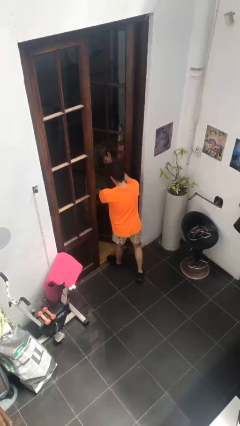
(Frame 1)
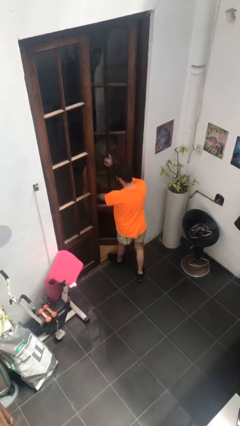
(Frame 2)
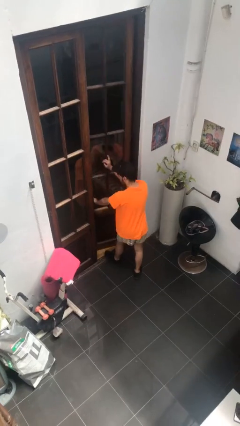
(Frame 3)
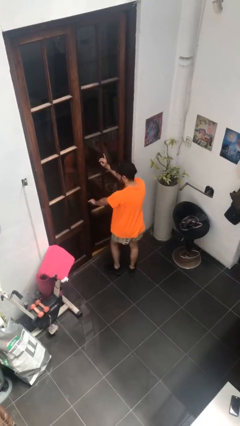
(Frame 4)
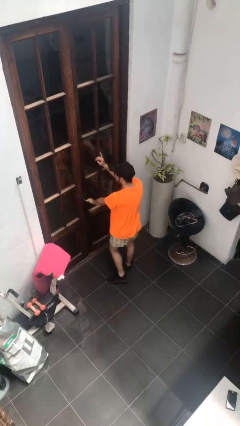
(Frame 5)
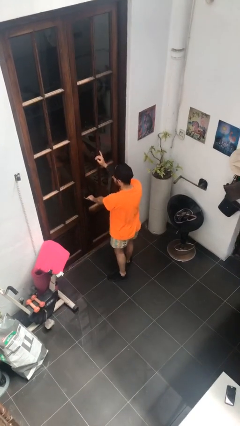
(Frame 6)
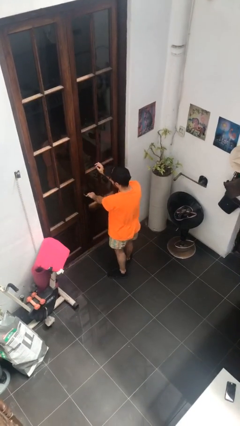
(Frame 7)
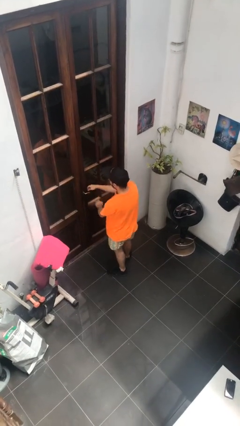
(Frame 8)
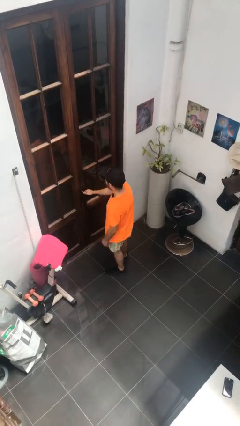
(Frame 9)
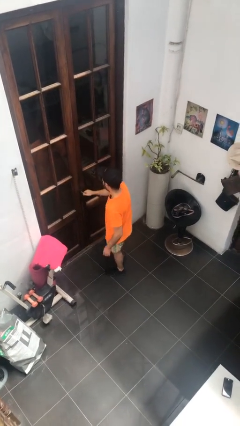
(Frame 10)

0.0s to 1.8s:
person closes facility door

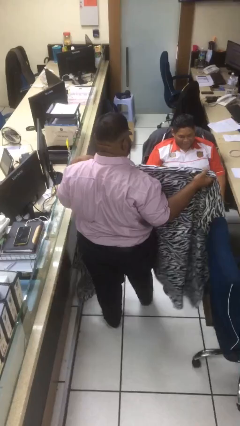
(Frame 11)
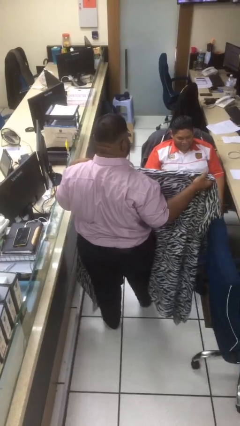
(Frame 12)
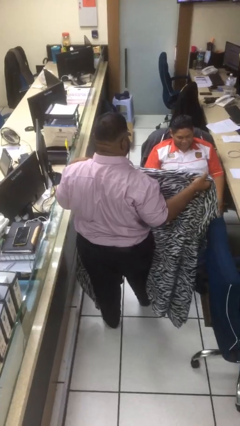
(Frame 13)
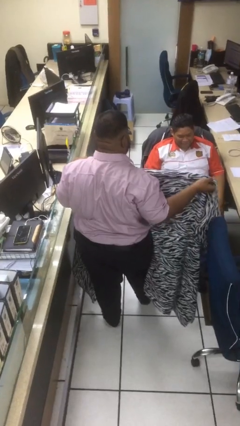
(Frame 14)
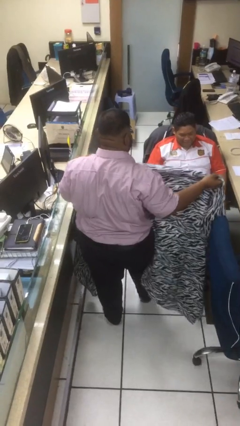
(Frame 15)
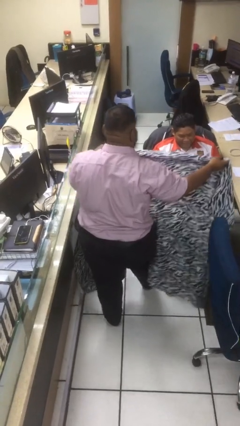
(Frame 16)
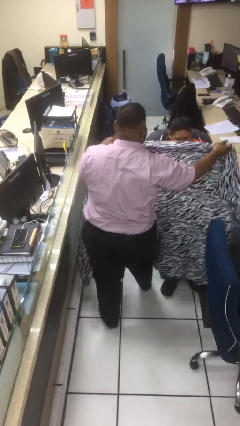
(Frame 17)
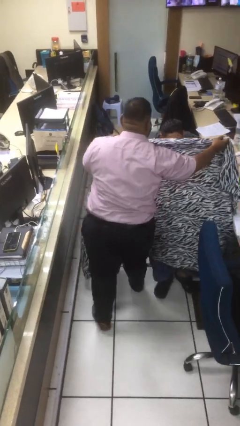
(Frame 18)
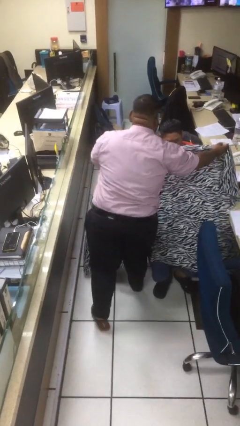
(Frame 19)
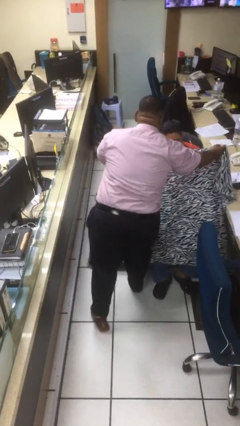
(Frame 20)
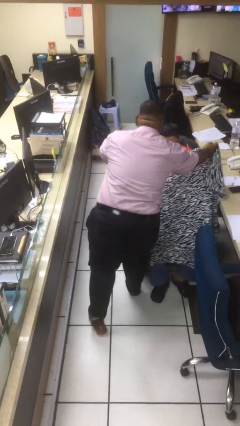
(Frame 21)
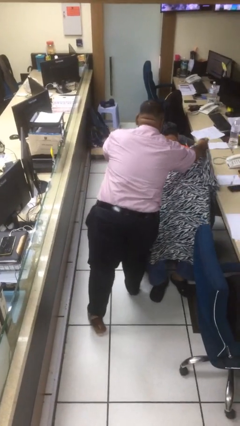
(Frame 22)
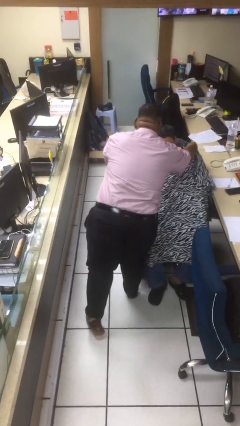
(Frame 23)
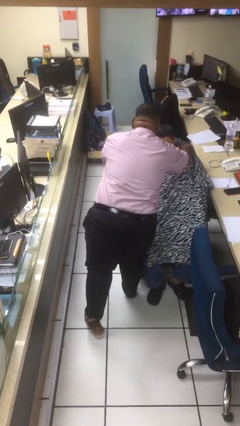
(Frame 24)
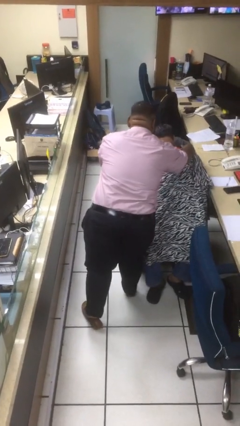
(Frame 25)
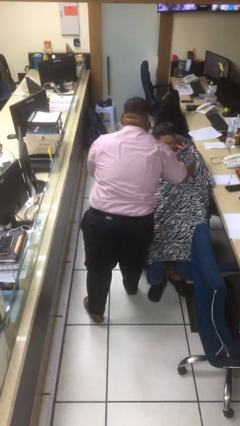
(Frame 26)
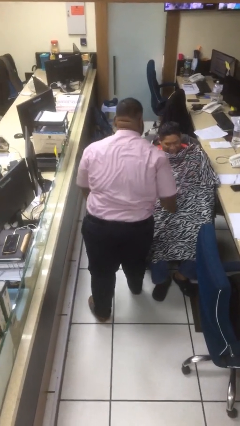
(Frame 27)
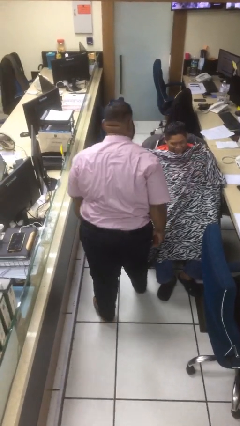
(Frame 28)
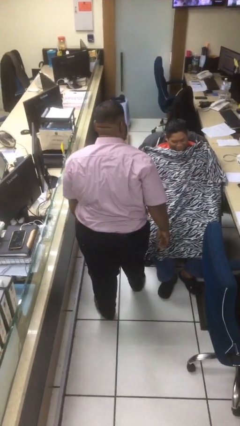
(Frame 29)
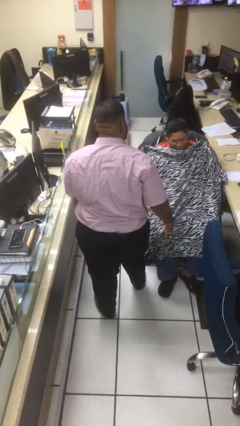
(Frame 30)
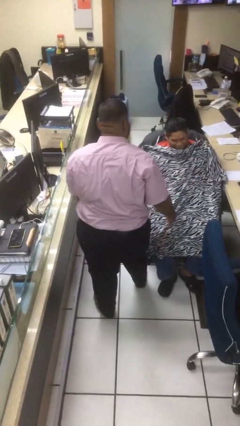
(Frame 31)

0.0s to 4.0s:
person covers friend with blanket

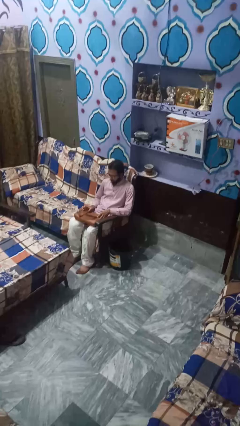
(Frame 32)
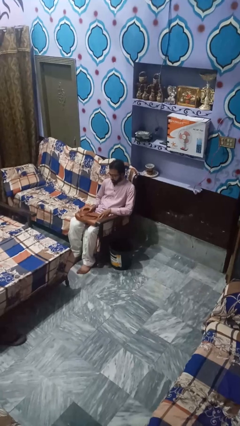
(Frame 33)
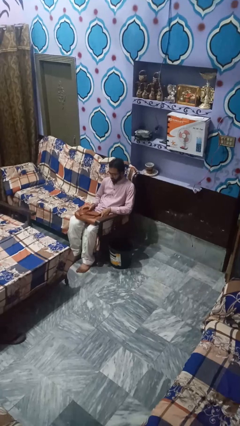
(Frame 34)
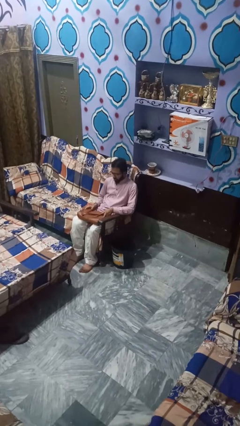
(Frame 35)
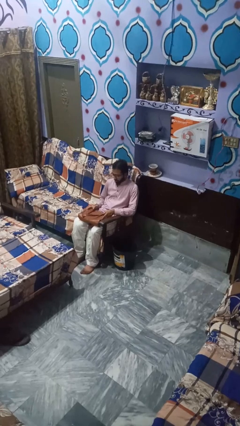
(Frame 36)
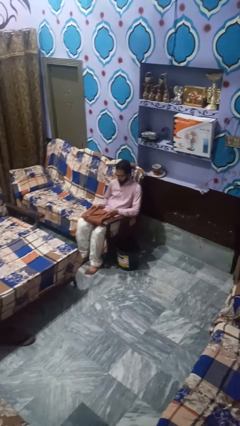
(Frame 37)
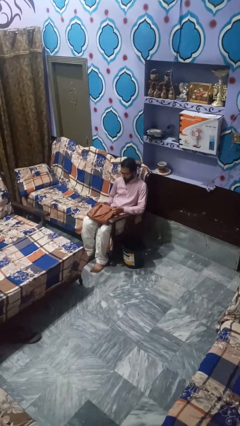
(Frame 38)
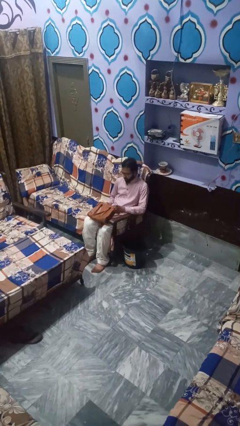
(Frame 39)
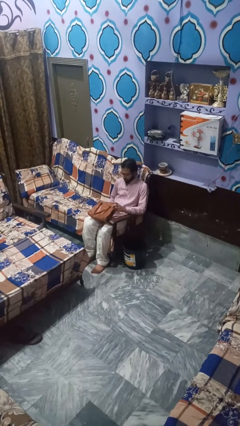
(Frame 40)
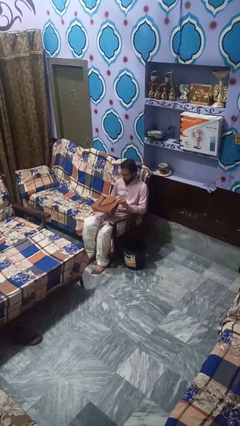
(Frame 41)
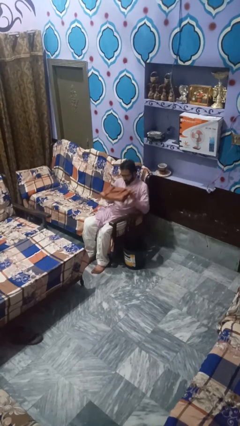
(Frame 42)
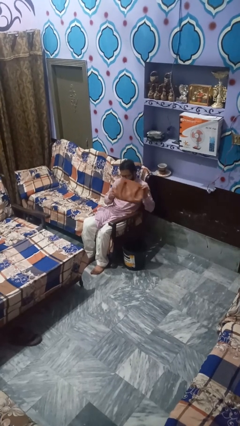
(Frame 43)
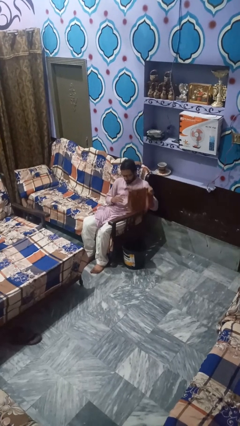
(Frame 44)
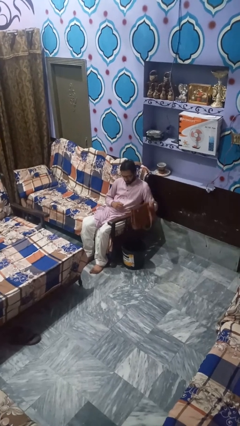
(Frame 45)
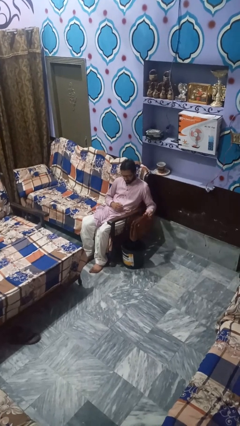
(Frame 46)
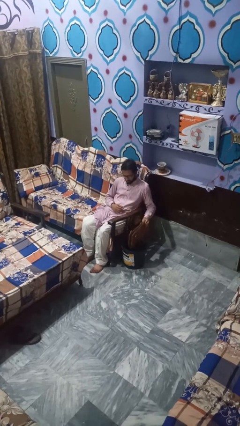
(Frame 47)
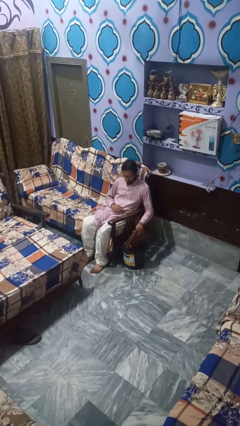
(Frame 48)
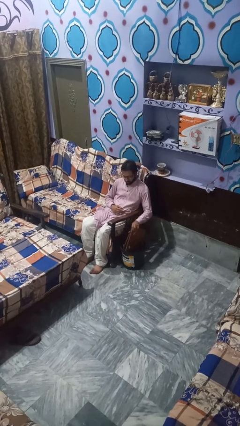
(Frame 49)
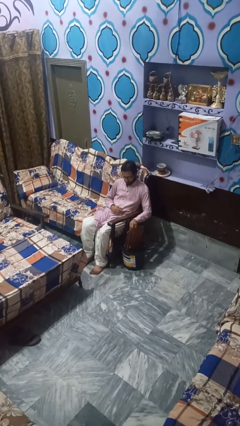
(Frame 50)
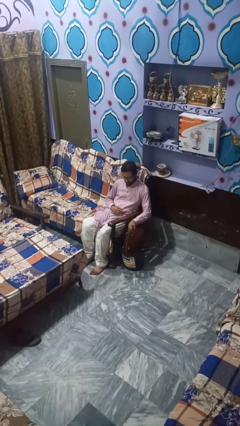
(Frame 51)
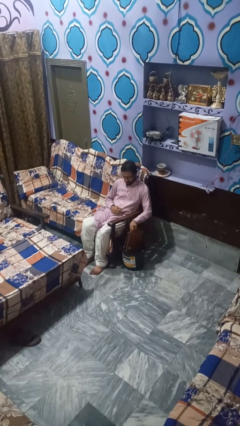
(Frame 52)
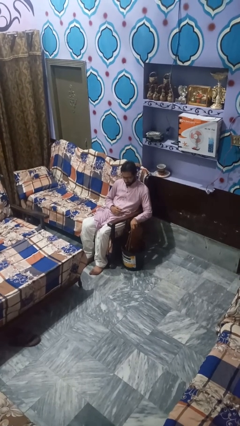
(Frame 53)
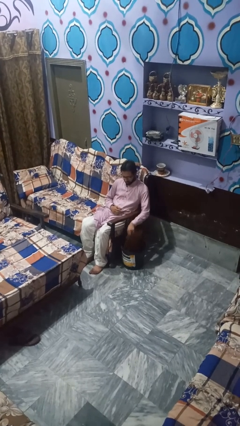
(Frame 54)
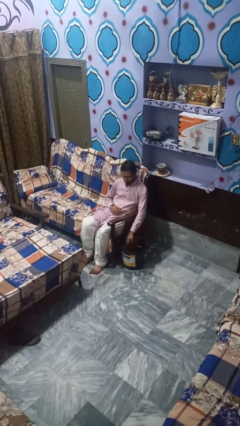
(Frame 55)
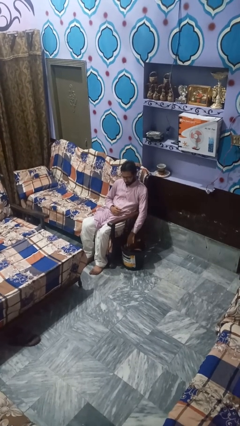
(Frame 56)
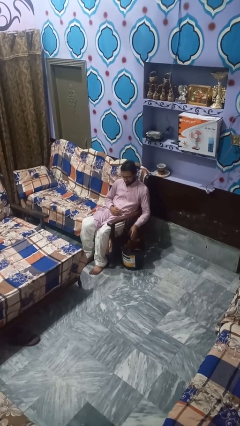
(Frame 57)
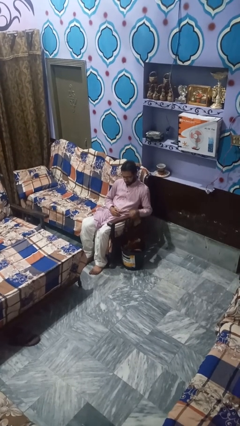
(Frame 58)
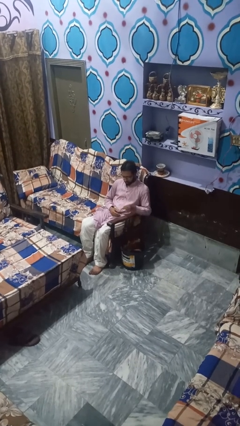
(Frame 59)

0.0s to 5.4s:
person puts object into basket

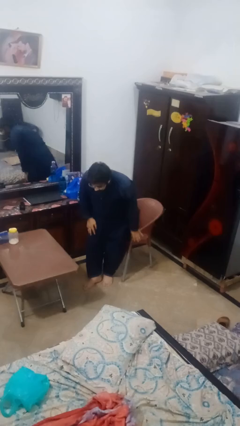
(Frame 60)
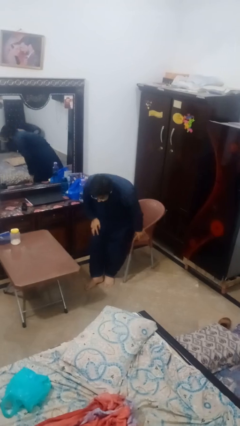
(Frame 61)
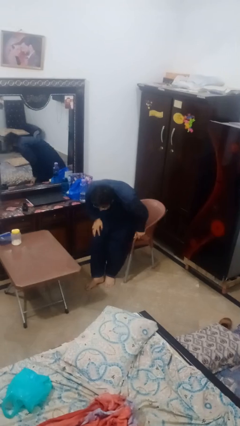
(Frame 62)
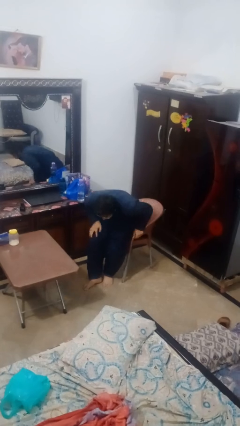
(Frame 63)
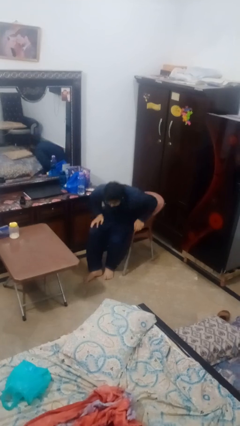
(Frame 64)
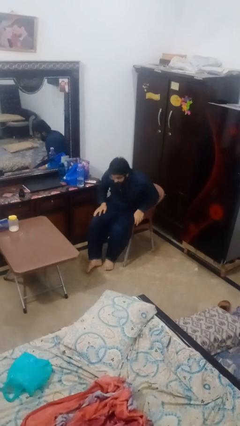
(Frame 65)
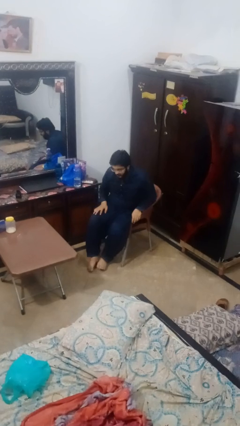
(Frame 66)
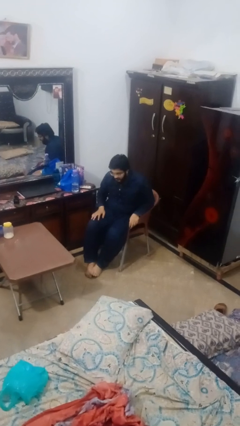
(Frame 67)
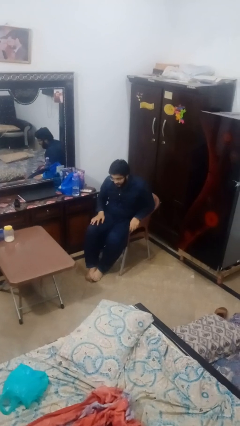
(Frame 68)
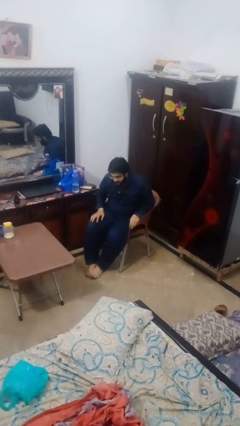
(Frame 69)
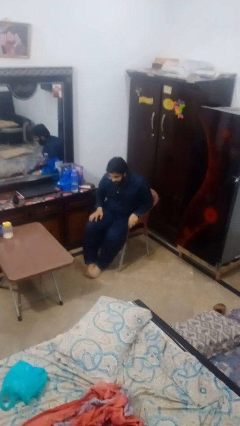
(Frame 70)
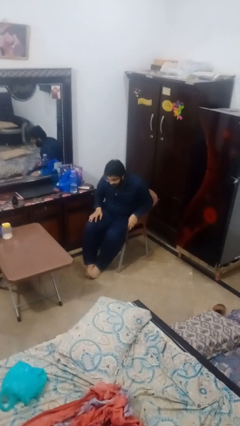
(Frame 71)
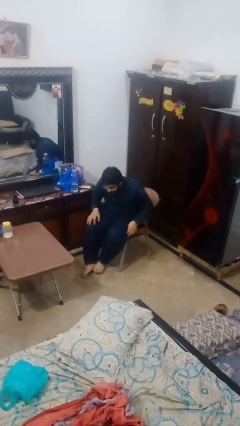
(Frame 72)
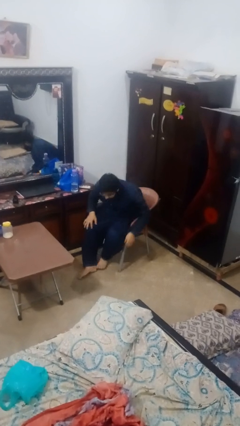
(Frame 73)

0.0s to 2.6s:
person sits down

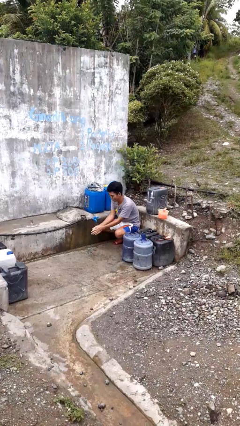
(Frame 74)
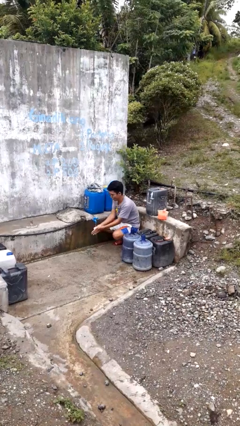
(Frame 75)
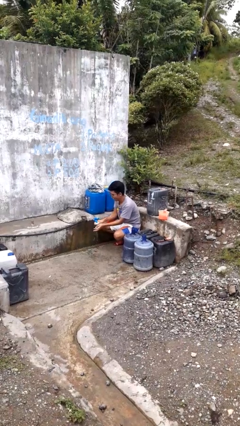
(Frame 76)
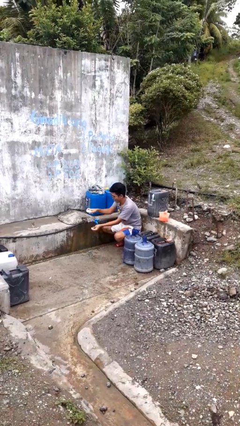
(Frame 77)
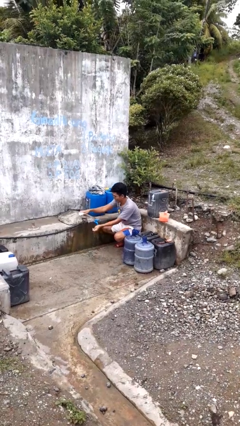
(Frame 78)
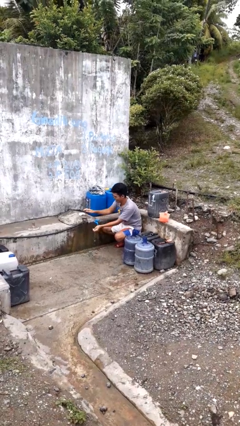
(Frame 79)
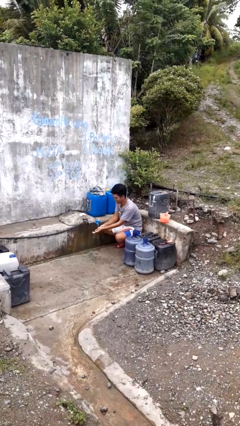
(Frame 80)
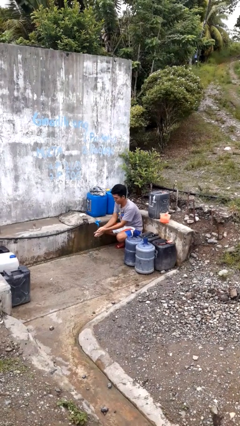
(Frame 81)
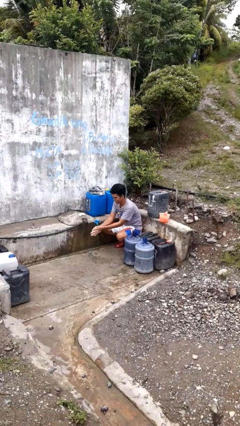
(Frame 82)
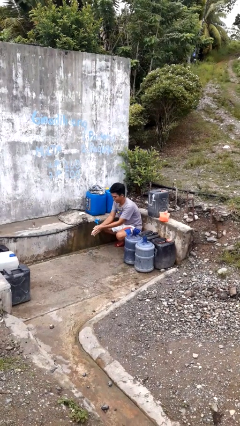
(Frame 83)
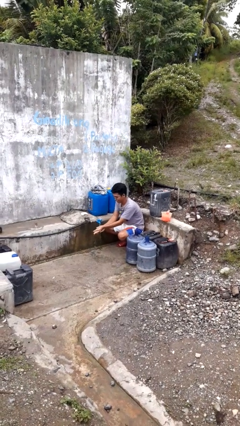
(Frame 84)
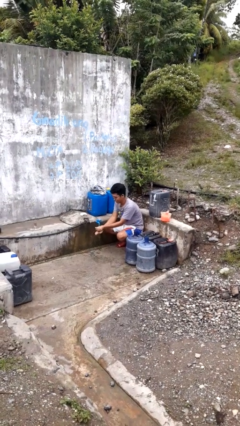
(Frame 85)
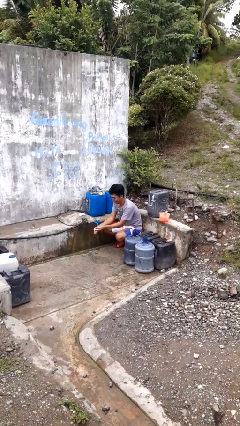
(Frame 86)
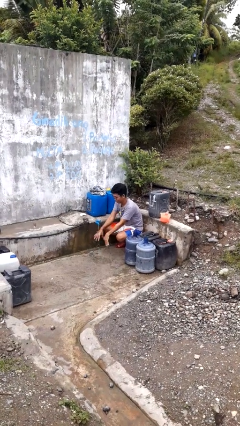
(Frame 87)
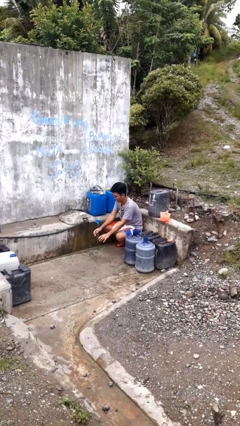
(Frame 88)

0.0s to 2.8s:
person washes hands

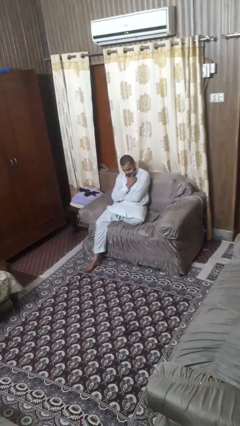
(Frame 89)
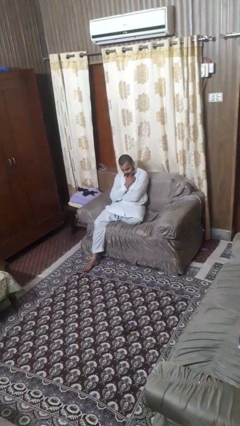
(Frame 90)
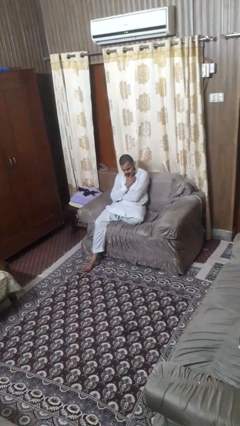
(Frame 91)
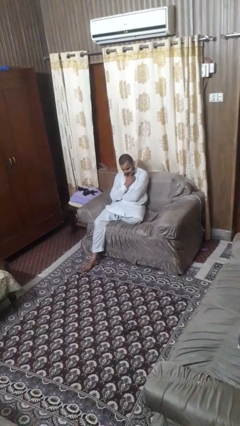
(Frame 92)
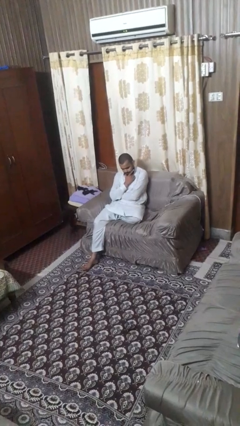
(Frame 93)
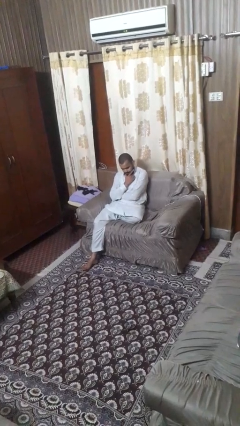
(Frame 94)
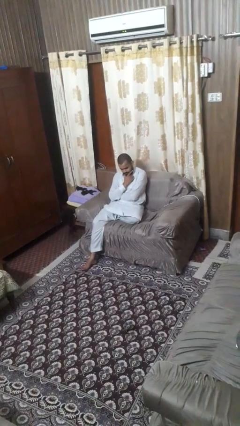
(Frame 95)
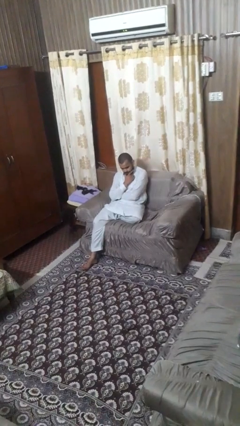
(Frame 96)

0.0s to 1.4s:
person strokes chin
